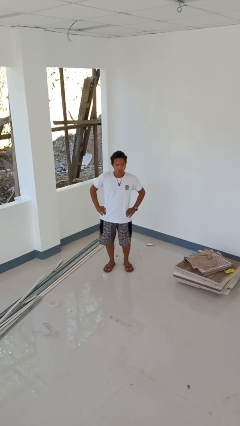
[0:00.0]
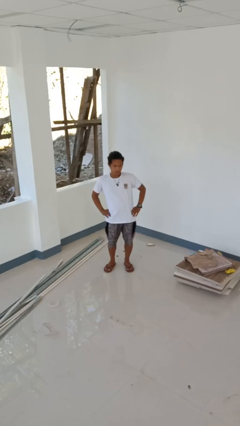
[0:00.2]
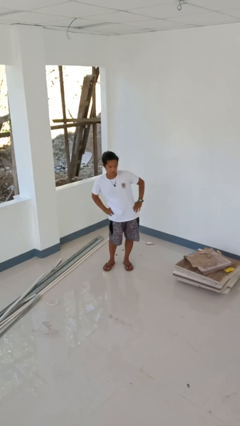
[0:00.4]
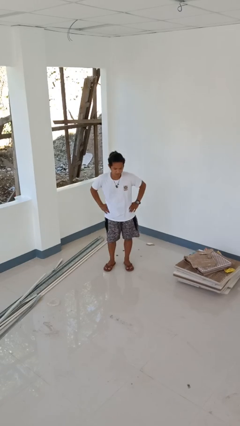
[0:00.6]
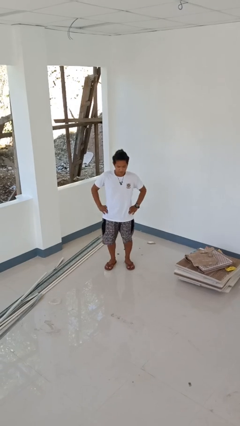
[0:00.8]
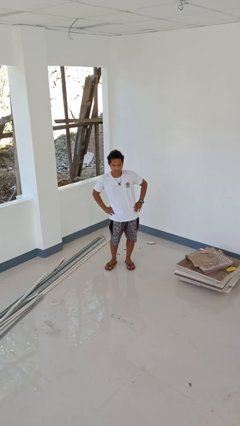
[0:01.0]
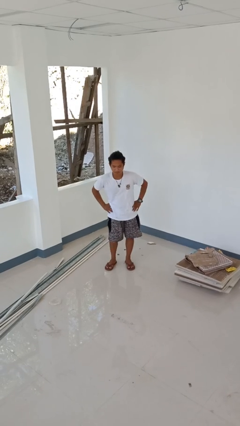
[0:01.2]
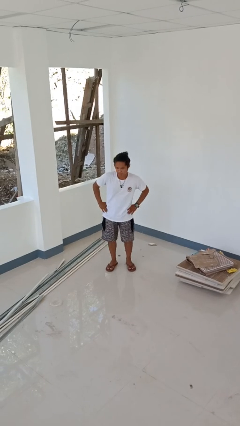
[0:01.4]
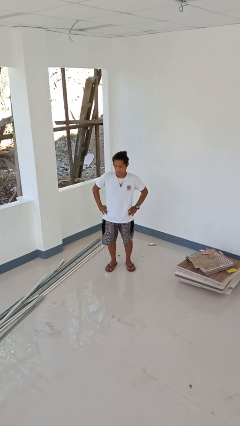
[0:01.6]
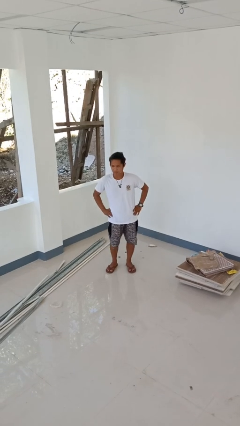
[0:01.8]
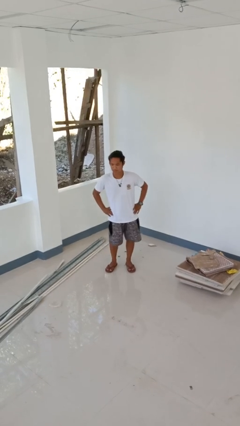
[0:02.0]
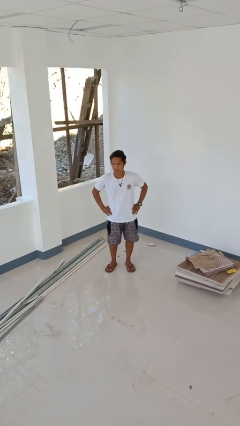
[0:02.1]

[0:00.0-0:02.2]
person wiggles hips

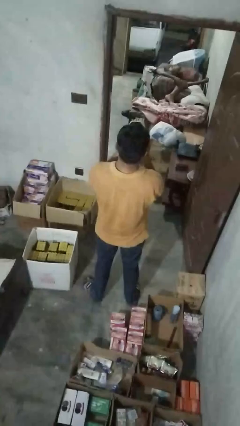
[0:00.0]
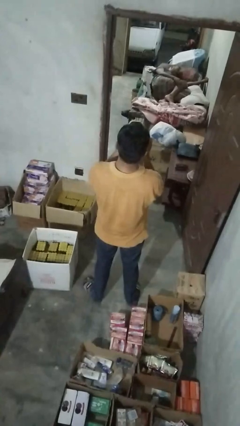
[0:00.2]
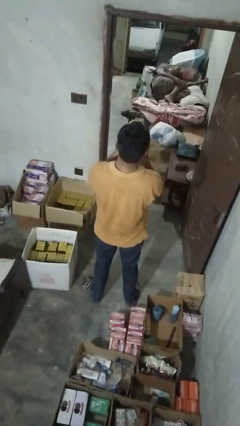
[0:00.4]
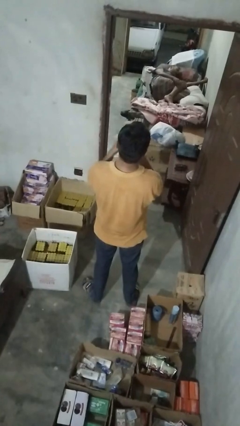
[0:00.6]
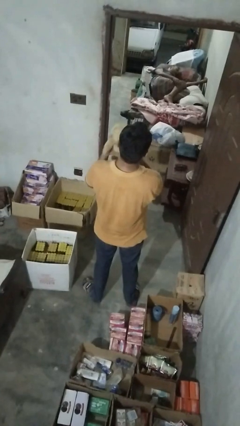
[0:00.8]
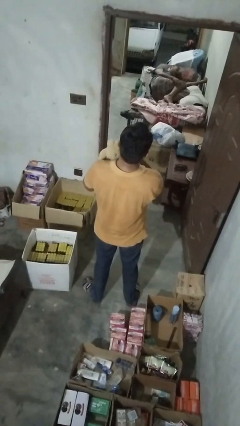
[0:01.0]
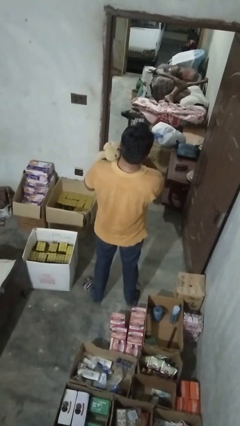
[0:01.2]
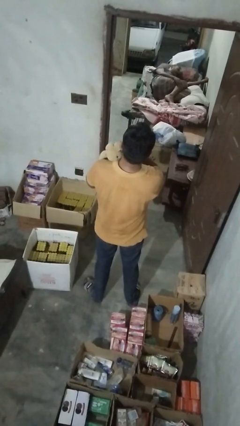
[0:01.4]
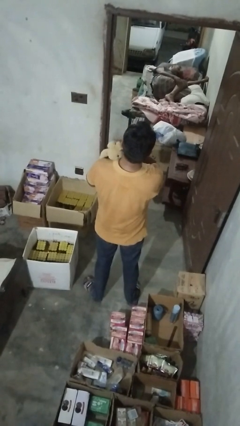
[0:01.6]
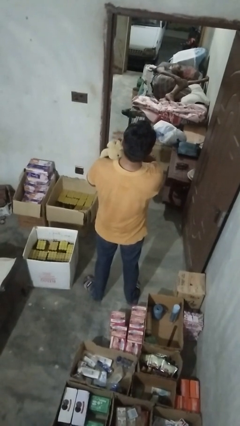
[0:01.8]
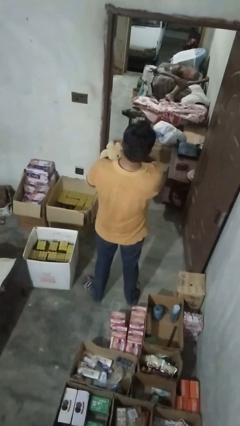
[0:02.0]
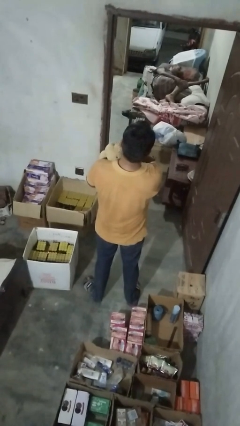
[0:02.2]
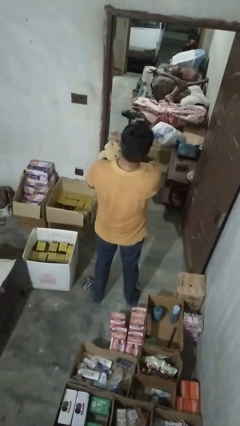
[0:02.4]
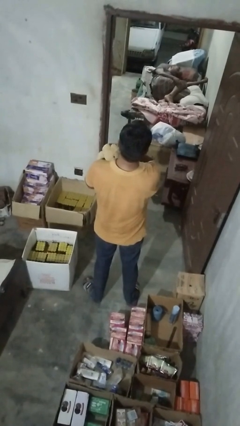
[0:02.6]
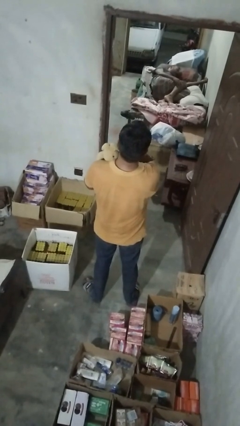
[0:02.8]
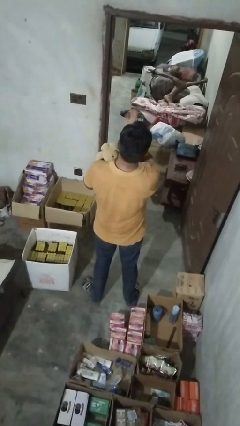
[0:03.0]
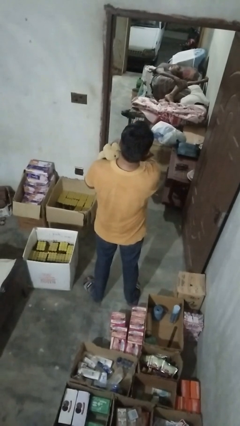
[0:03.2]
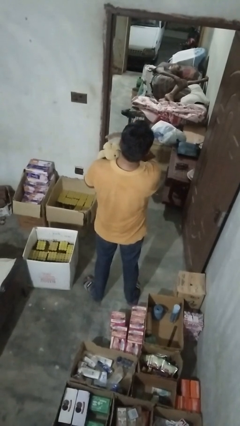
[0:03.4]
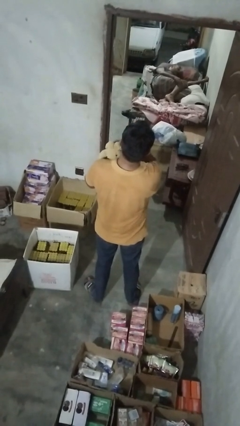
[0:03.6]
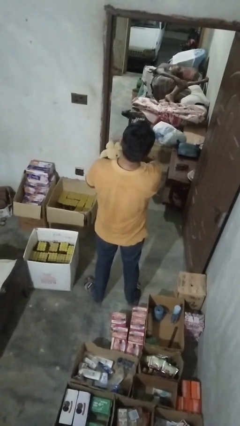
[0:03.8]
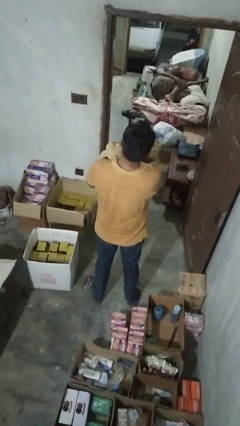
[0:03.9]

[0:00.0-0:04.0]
person hugs stuffed animal

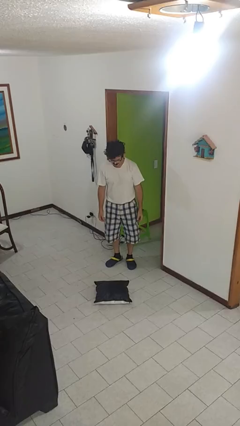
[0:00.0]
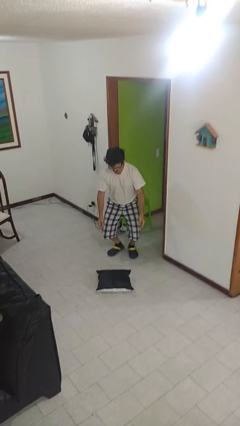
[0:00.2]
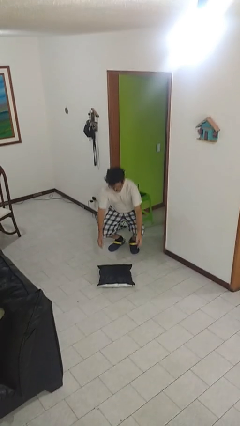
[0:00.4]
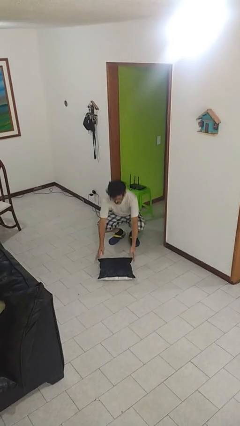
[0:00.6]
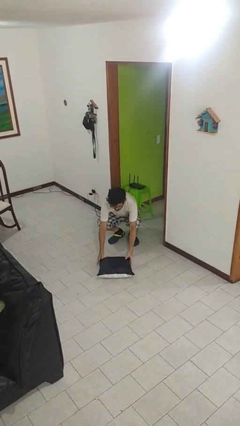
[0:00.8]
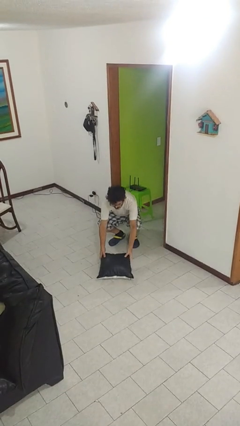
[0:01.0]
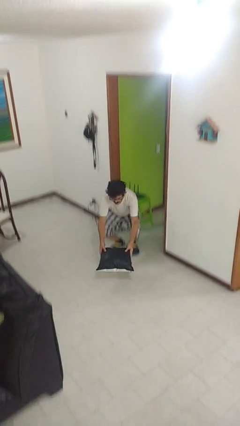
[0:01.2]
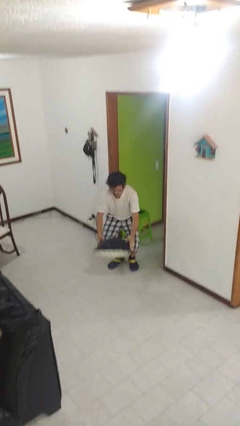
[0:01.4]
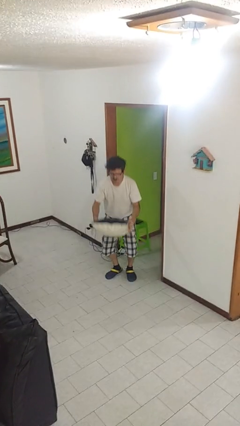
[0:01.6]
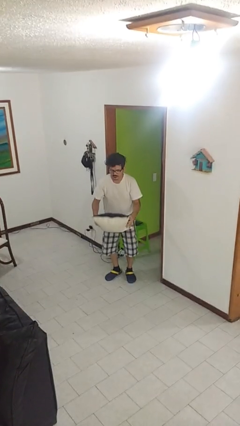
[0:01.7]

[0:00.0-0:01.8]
person picks up object from floor

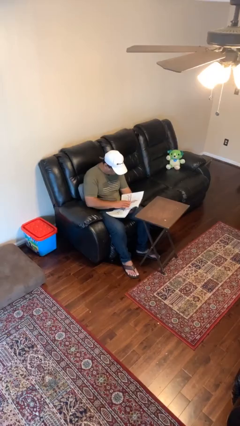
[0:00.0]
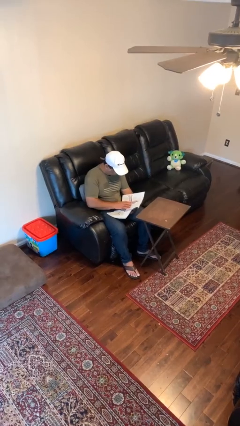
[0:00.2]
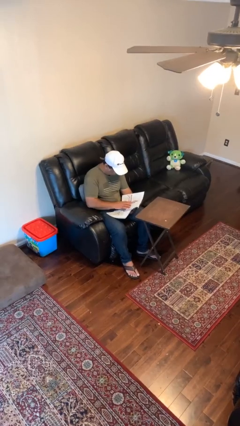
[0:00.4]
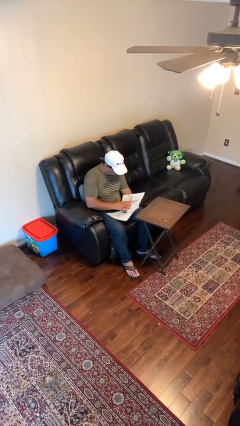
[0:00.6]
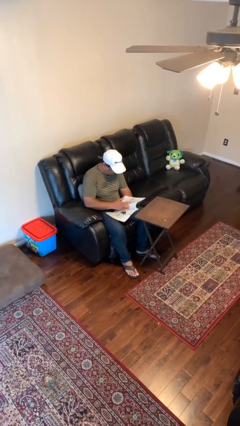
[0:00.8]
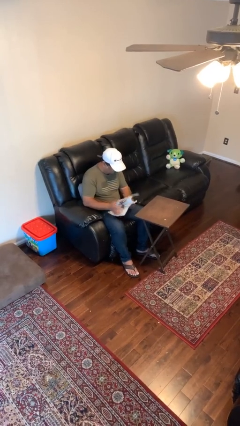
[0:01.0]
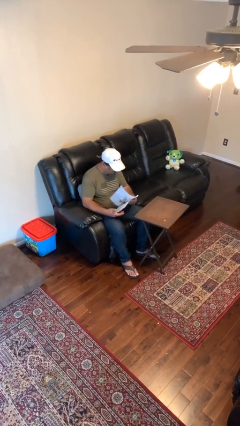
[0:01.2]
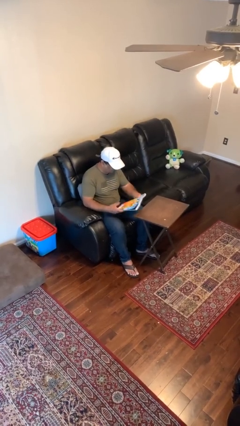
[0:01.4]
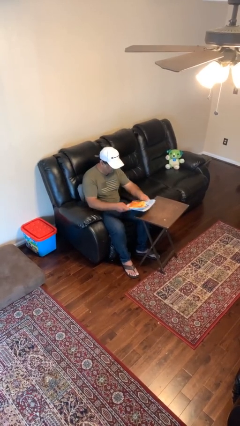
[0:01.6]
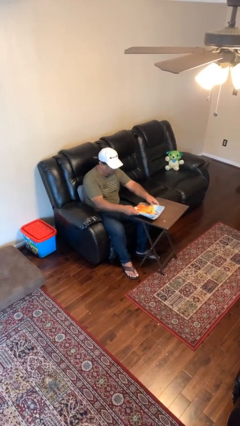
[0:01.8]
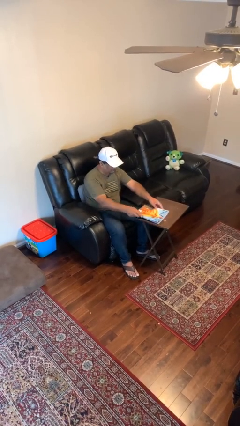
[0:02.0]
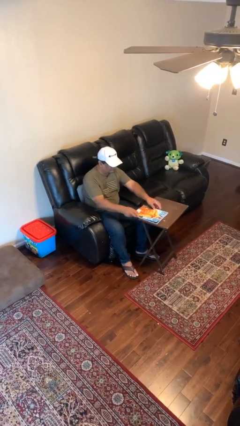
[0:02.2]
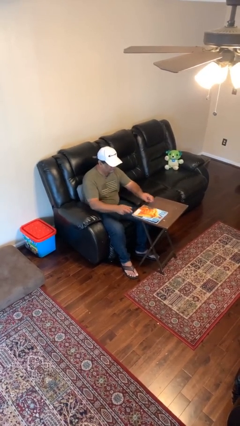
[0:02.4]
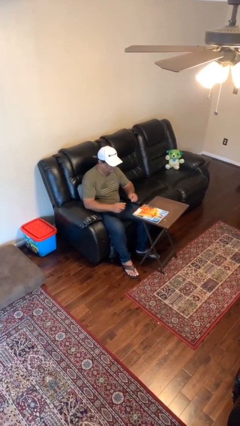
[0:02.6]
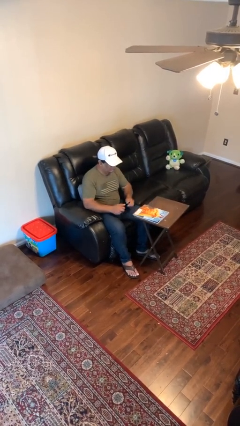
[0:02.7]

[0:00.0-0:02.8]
person puts down object on table

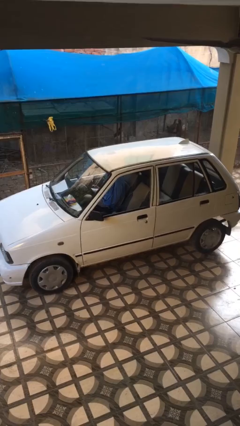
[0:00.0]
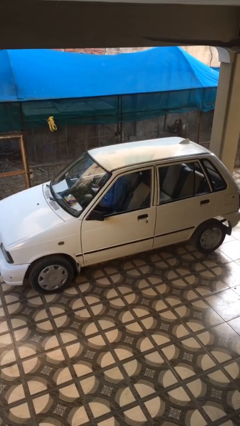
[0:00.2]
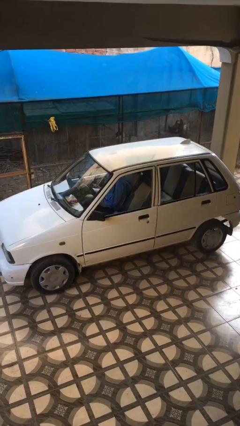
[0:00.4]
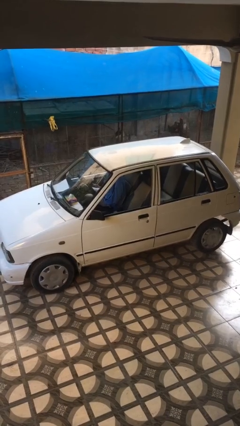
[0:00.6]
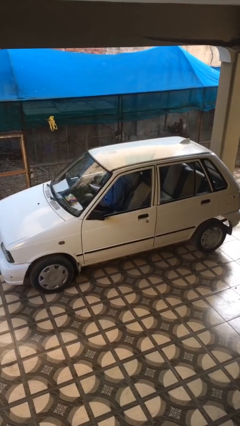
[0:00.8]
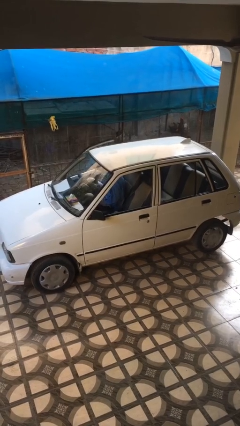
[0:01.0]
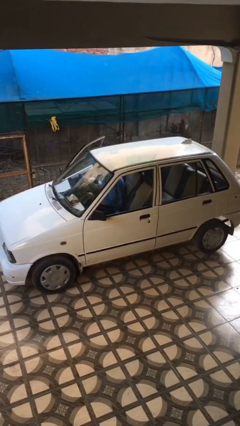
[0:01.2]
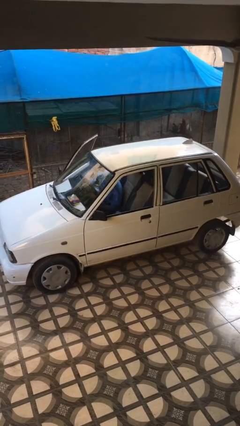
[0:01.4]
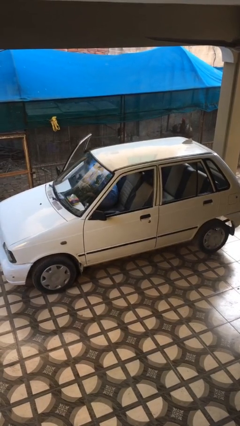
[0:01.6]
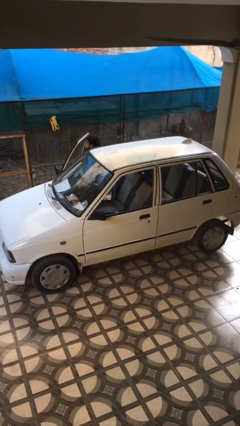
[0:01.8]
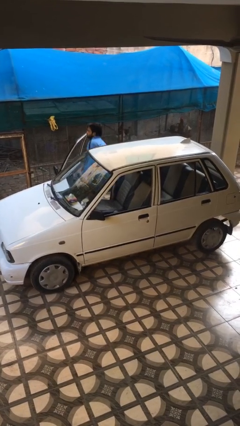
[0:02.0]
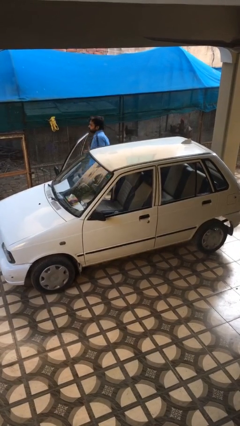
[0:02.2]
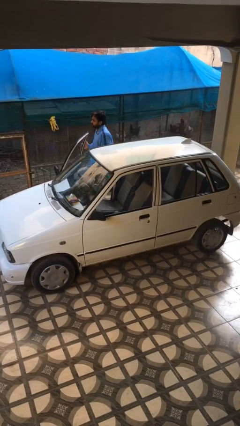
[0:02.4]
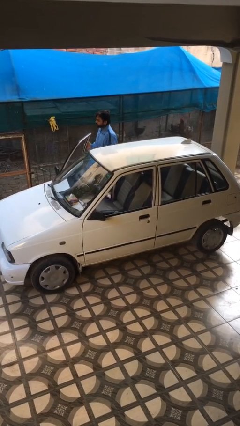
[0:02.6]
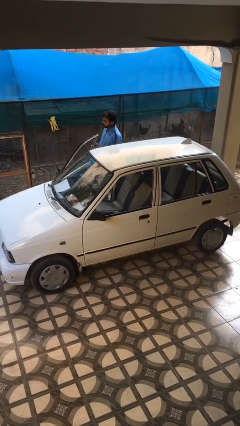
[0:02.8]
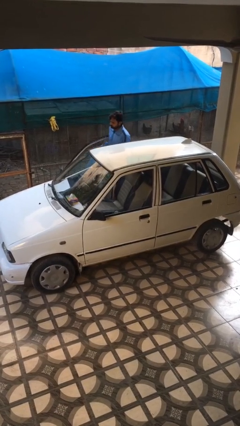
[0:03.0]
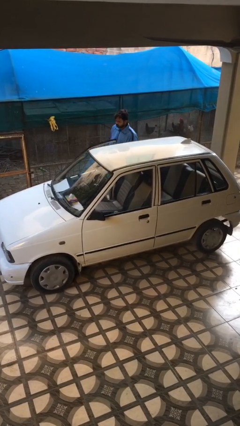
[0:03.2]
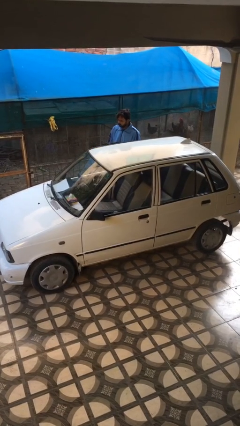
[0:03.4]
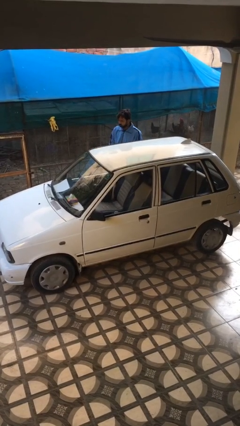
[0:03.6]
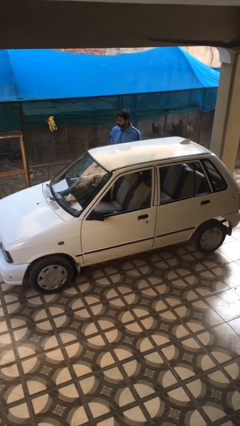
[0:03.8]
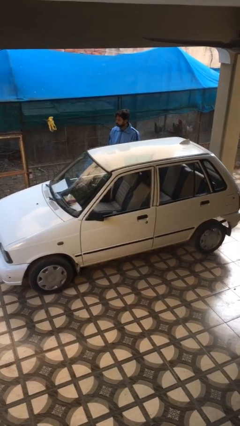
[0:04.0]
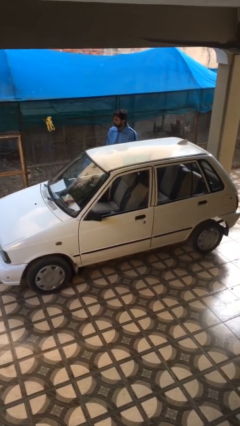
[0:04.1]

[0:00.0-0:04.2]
car drops off person

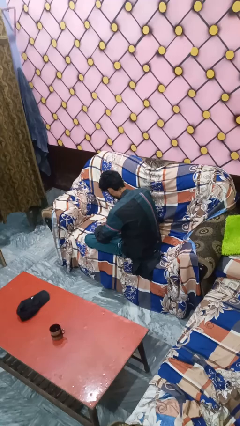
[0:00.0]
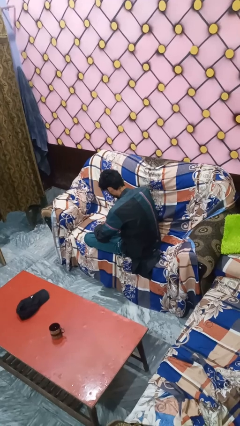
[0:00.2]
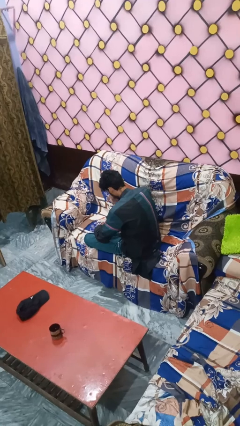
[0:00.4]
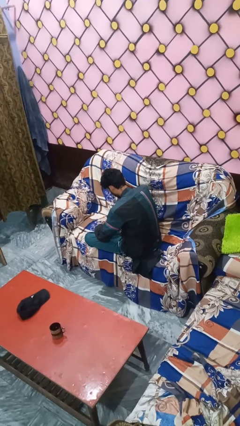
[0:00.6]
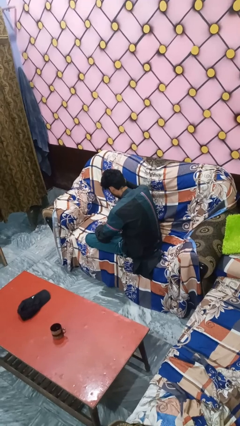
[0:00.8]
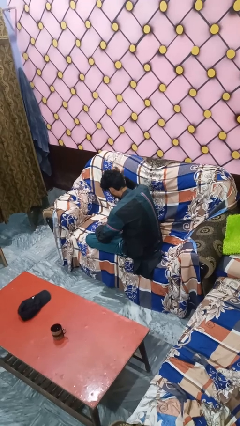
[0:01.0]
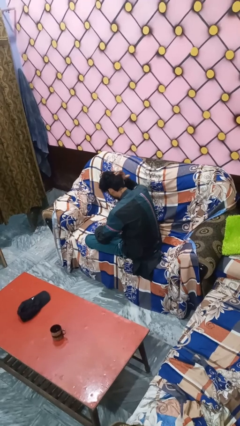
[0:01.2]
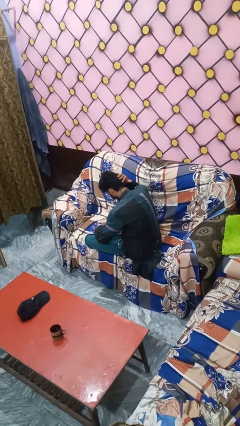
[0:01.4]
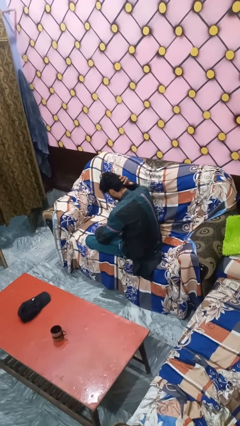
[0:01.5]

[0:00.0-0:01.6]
person pats head

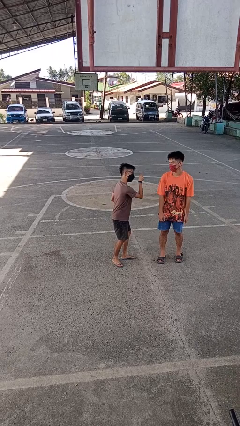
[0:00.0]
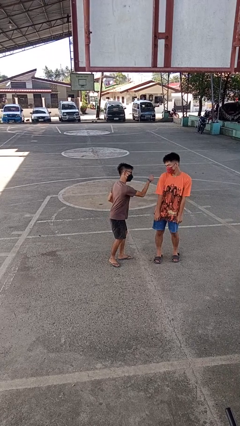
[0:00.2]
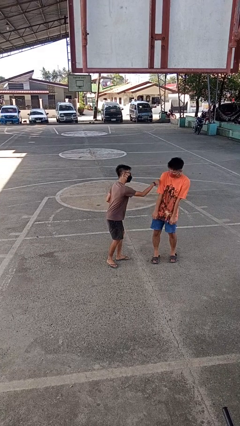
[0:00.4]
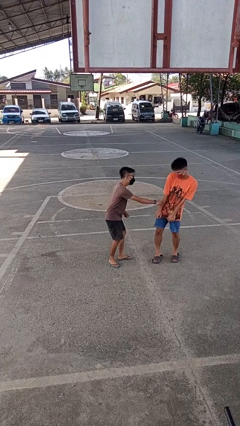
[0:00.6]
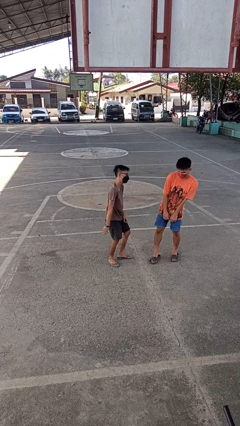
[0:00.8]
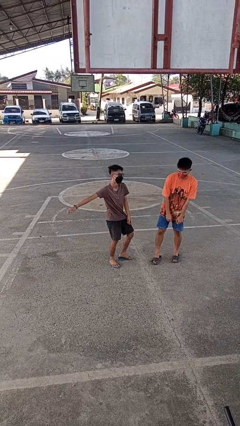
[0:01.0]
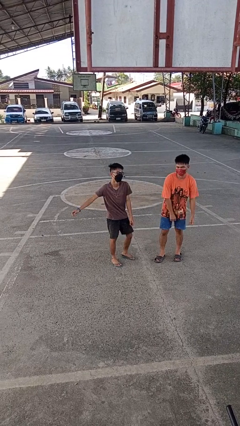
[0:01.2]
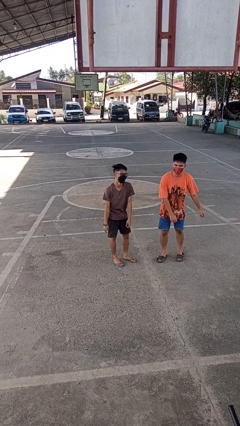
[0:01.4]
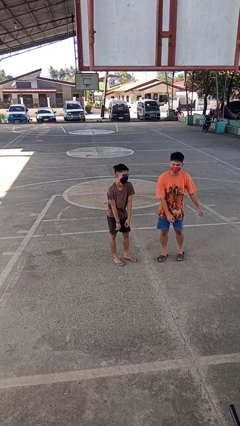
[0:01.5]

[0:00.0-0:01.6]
person pounds shoulders of person
